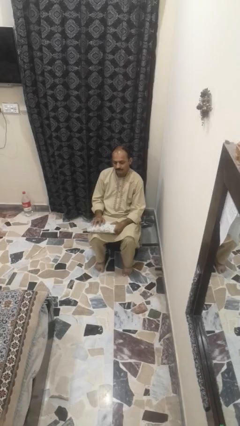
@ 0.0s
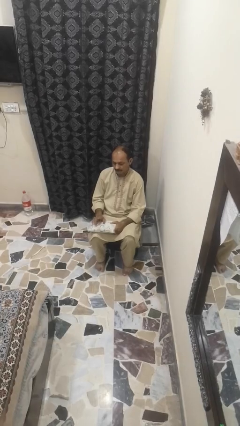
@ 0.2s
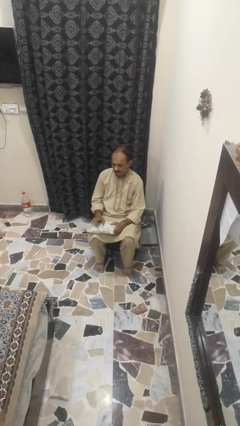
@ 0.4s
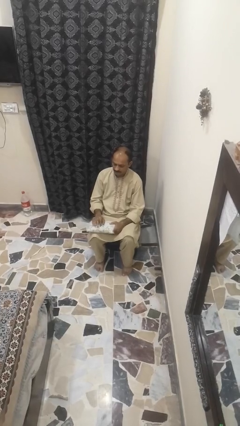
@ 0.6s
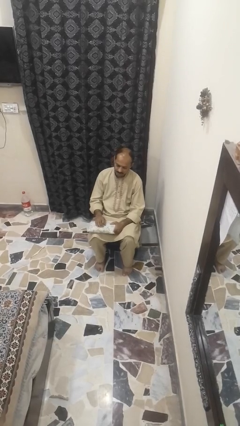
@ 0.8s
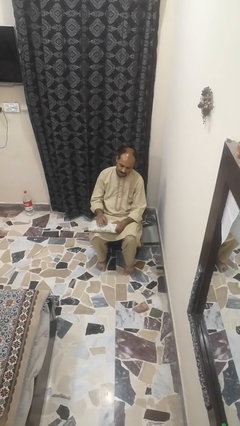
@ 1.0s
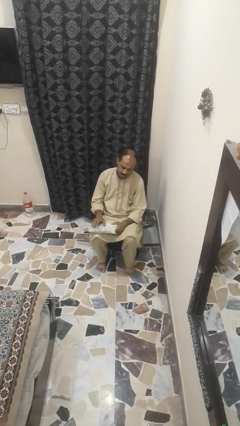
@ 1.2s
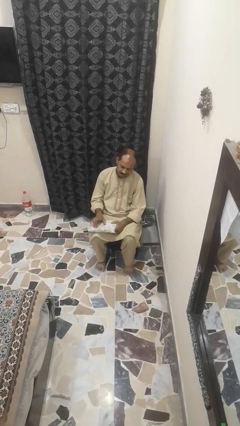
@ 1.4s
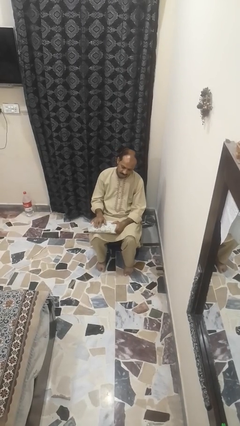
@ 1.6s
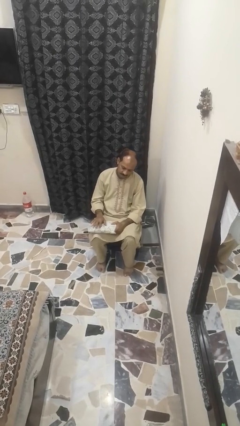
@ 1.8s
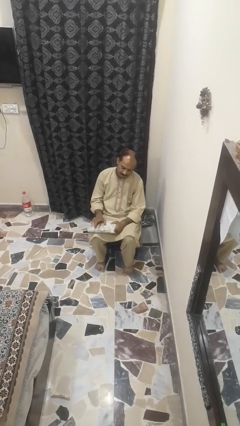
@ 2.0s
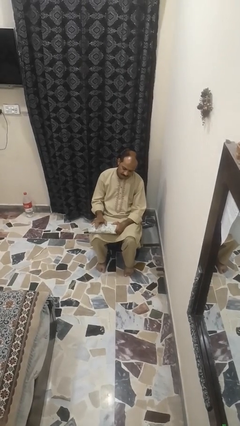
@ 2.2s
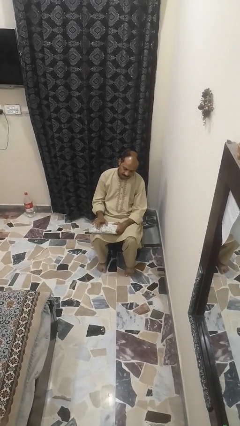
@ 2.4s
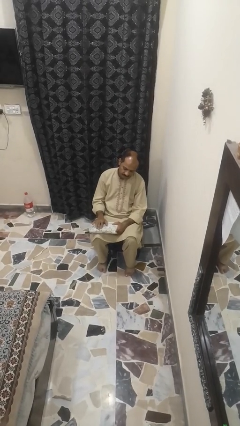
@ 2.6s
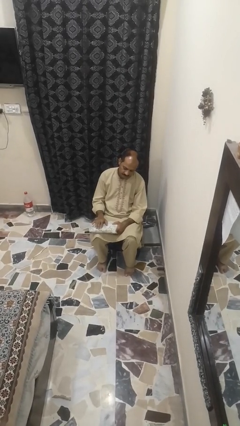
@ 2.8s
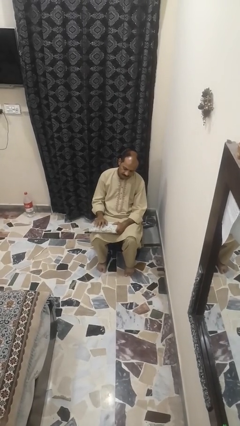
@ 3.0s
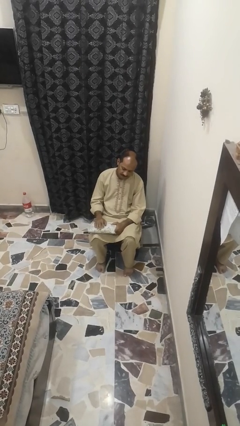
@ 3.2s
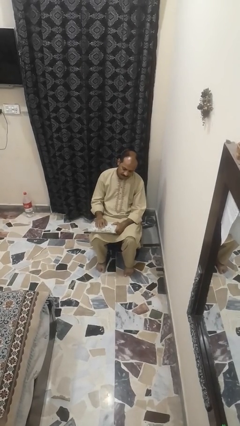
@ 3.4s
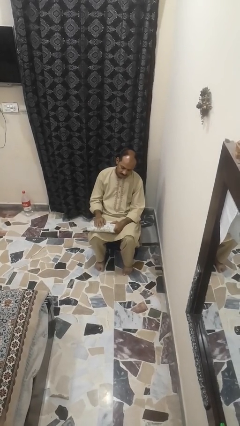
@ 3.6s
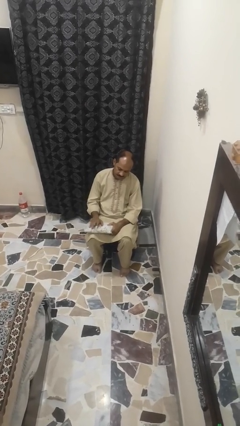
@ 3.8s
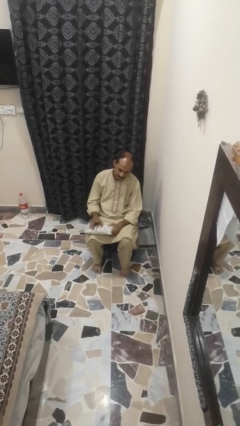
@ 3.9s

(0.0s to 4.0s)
person taps object with finger

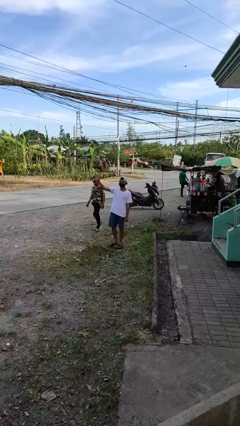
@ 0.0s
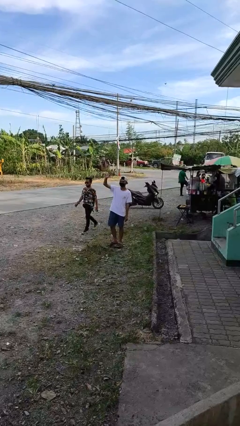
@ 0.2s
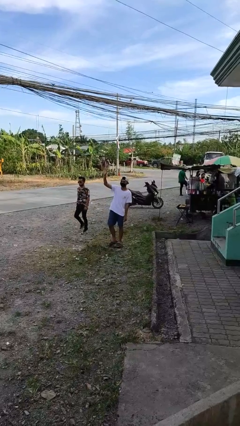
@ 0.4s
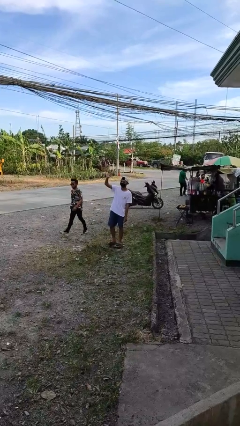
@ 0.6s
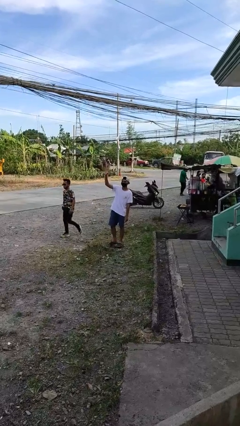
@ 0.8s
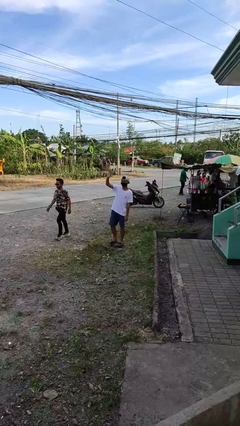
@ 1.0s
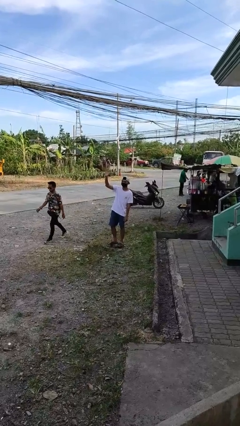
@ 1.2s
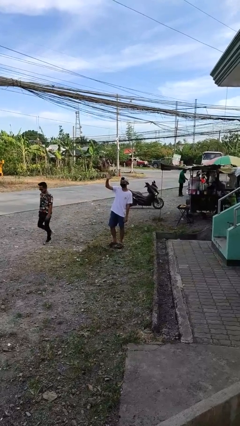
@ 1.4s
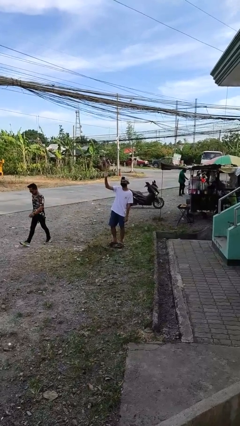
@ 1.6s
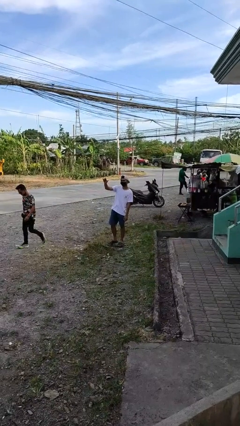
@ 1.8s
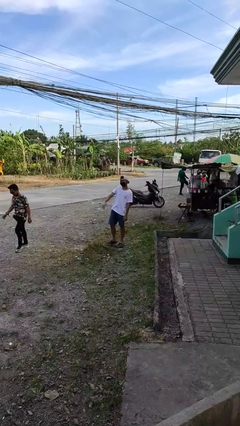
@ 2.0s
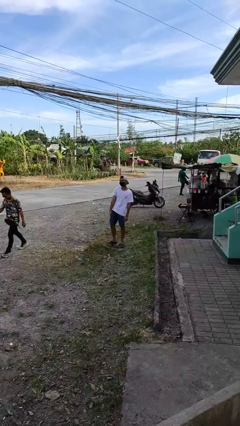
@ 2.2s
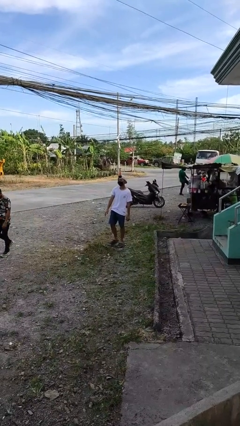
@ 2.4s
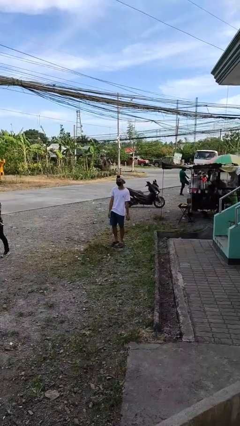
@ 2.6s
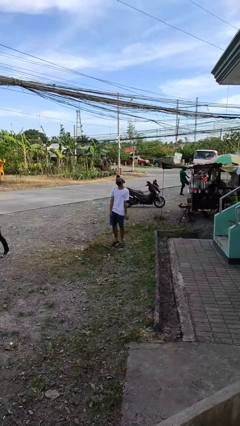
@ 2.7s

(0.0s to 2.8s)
person waves at person

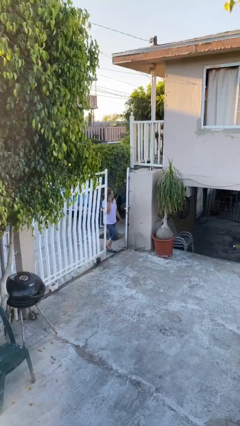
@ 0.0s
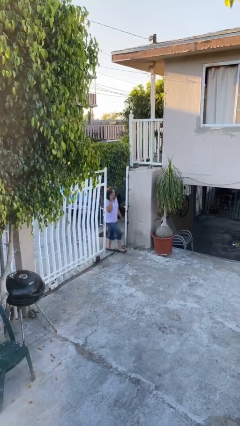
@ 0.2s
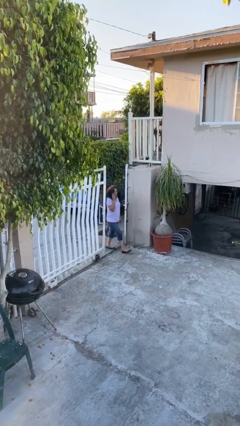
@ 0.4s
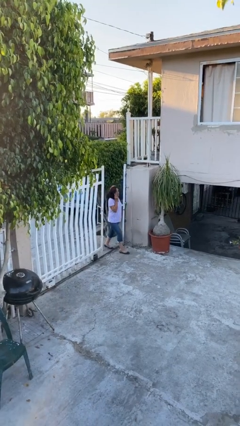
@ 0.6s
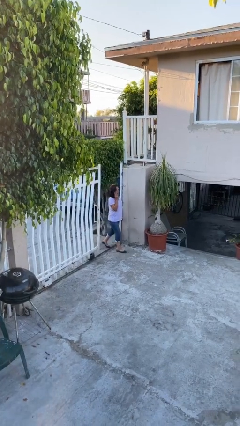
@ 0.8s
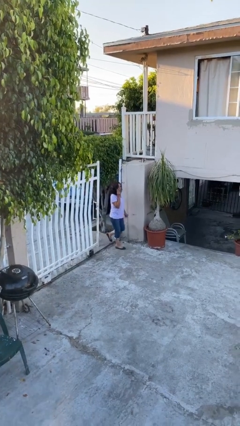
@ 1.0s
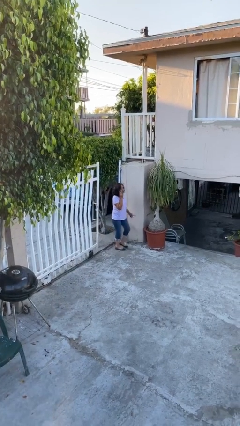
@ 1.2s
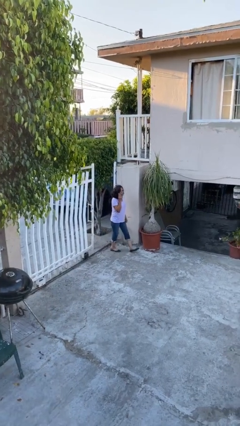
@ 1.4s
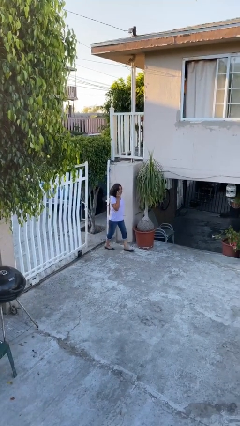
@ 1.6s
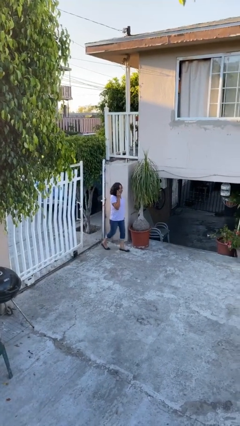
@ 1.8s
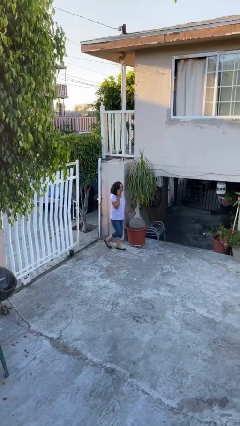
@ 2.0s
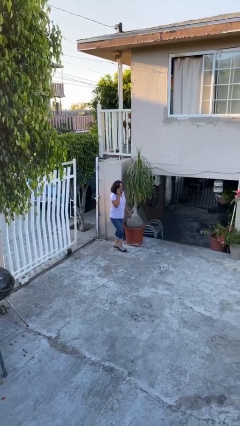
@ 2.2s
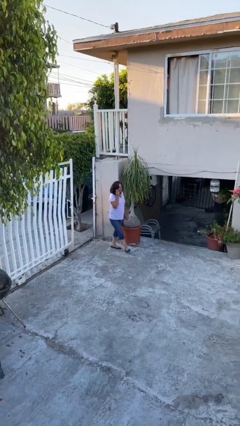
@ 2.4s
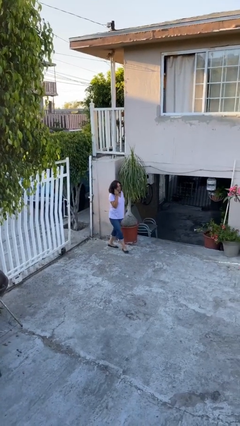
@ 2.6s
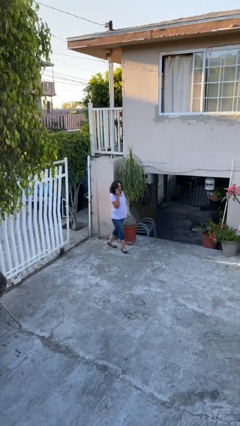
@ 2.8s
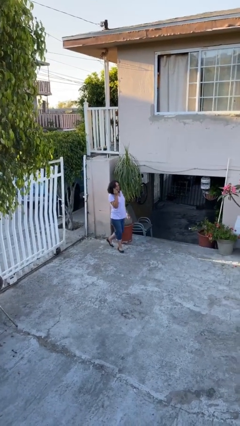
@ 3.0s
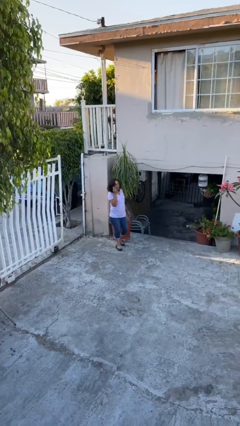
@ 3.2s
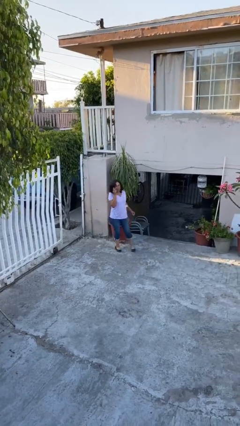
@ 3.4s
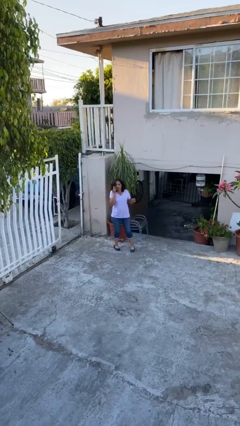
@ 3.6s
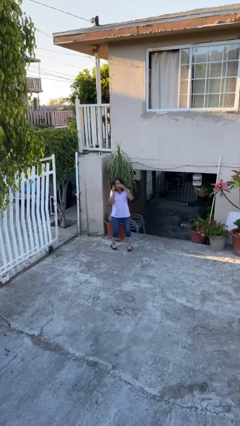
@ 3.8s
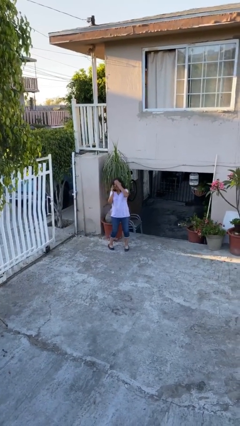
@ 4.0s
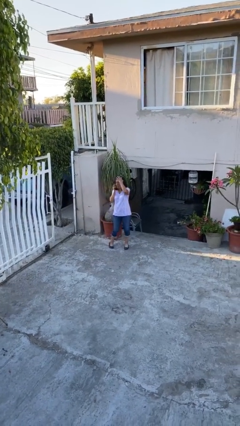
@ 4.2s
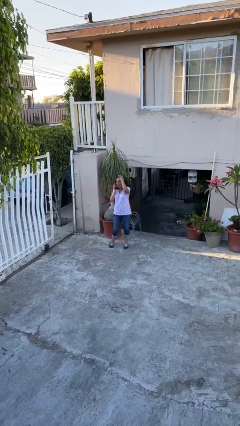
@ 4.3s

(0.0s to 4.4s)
person enters scene through structure

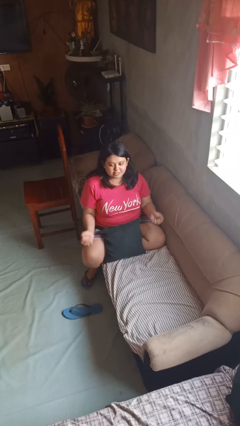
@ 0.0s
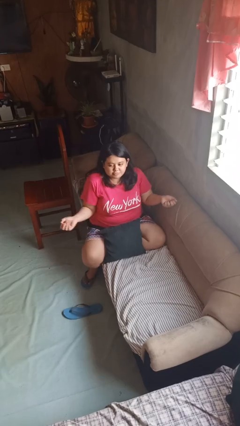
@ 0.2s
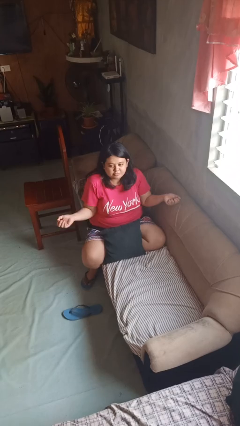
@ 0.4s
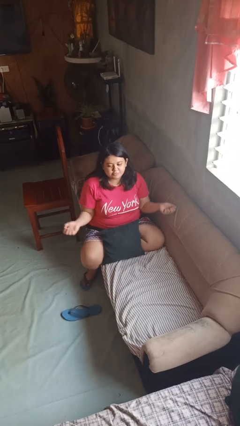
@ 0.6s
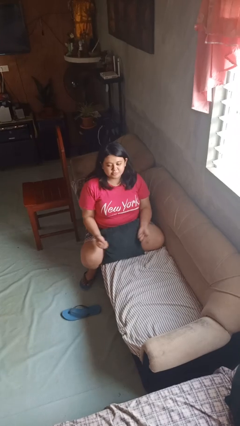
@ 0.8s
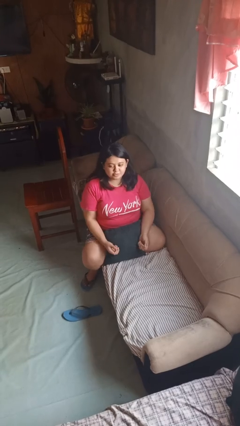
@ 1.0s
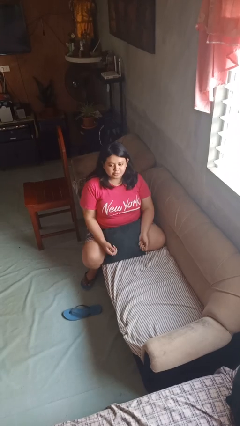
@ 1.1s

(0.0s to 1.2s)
person shrugs

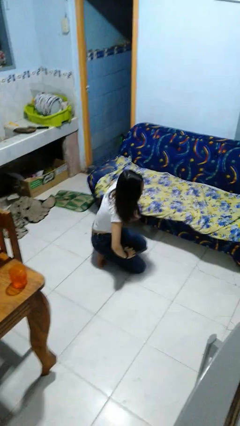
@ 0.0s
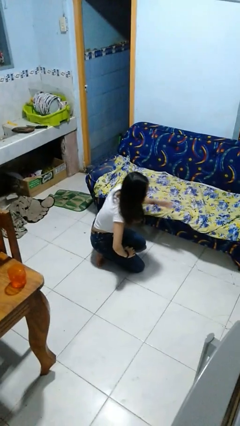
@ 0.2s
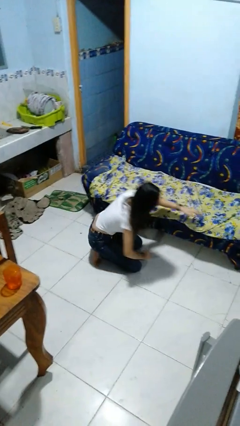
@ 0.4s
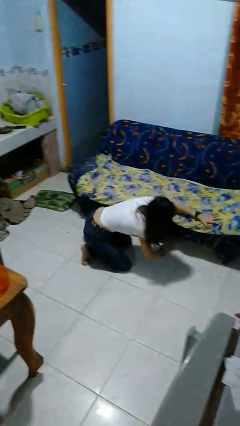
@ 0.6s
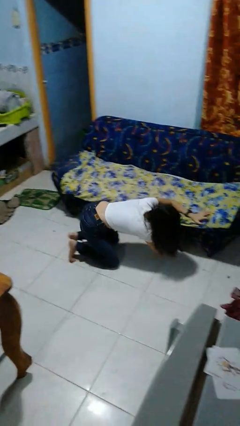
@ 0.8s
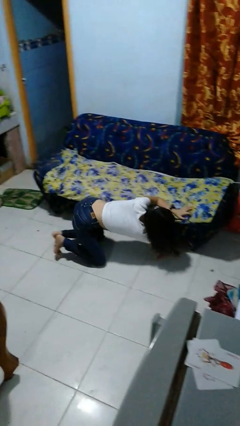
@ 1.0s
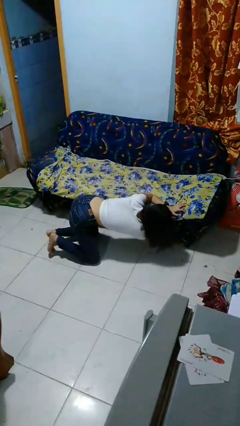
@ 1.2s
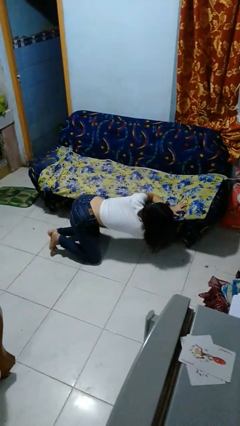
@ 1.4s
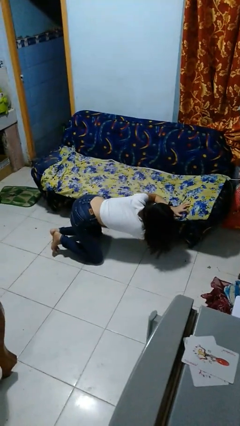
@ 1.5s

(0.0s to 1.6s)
person searches under couch

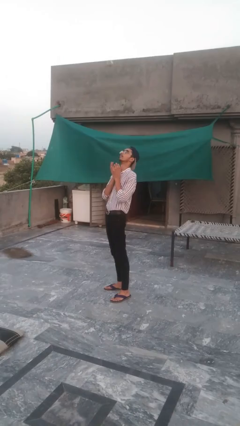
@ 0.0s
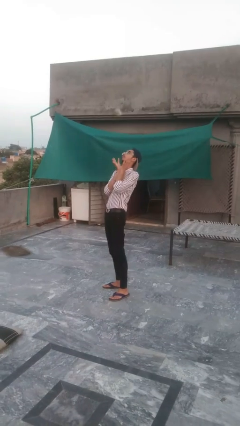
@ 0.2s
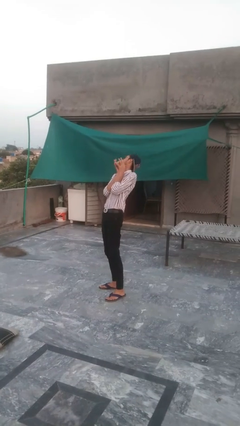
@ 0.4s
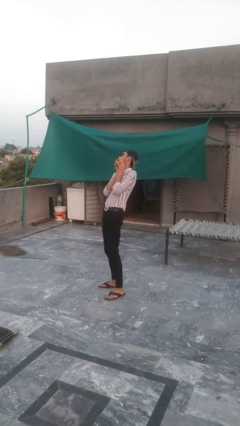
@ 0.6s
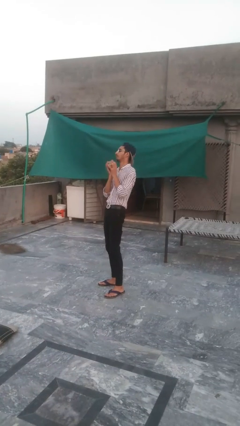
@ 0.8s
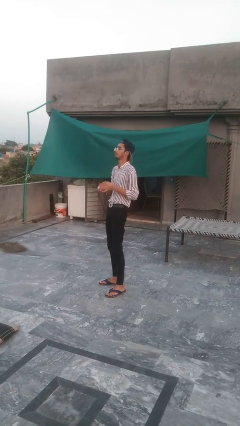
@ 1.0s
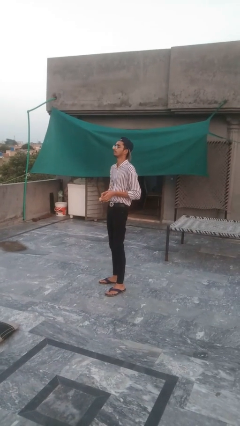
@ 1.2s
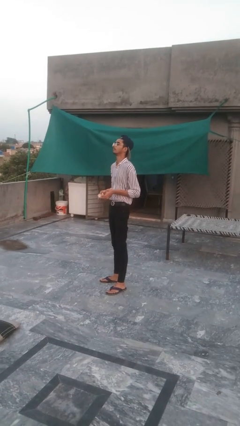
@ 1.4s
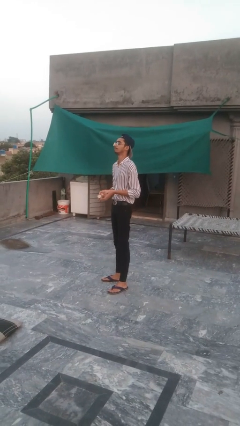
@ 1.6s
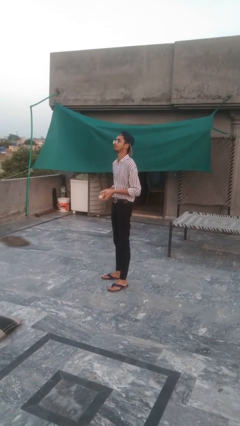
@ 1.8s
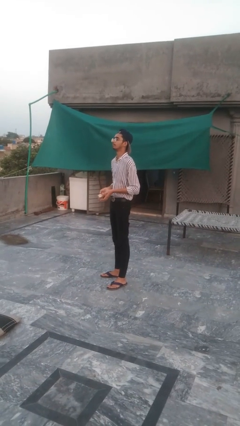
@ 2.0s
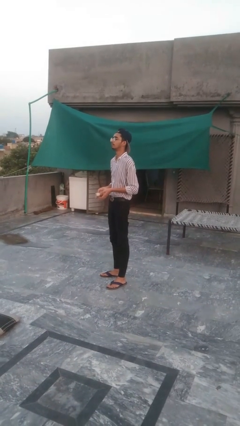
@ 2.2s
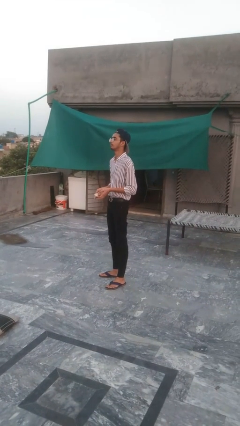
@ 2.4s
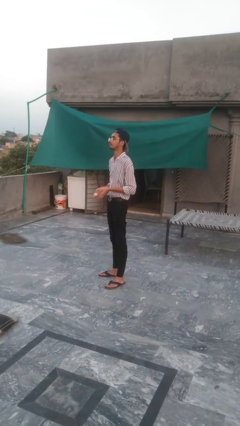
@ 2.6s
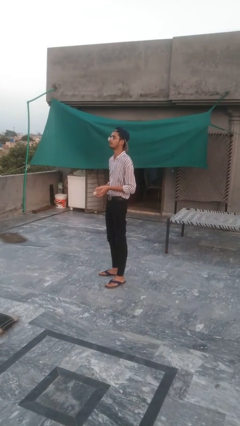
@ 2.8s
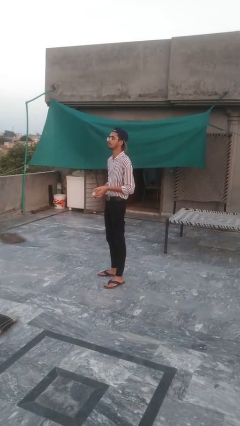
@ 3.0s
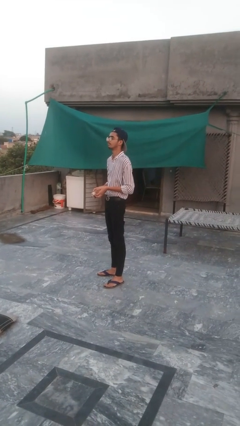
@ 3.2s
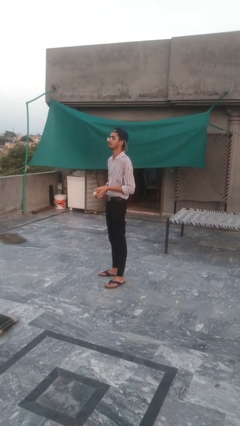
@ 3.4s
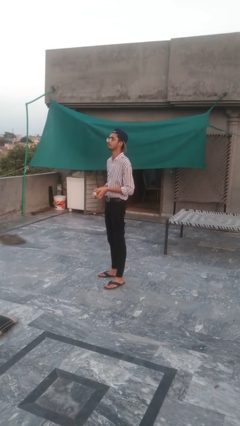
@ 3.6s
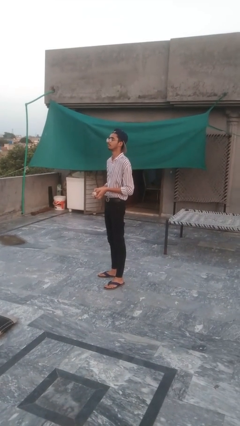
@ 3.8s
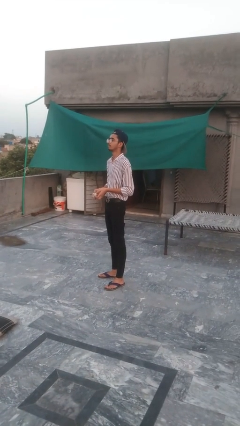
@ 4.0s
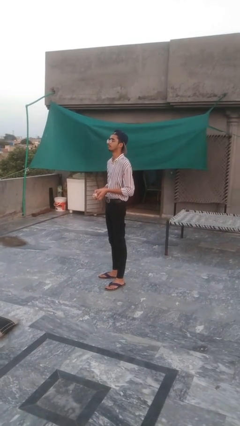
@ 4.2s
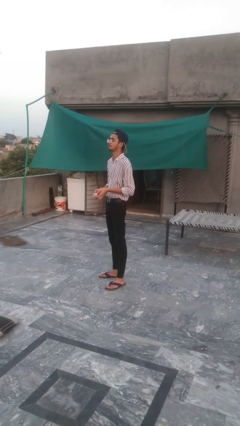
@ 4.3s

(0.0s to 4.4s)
person catches dropped object
